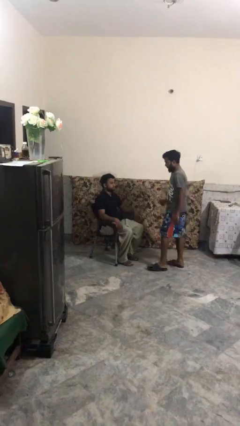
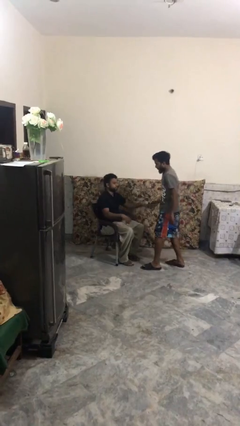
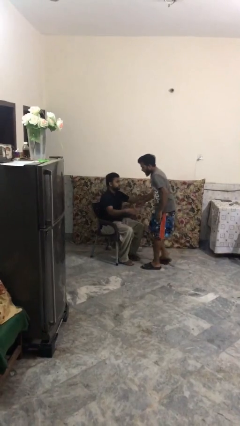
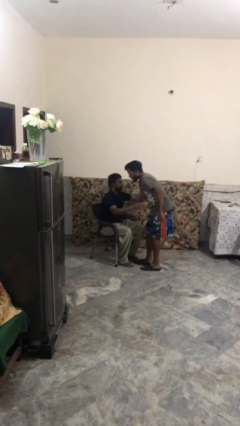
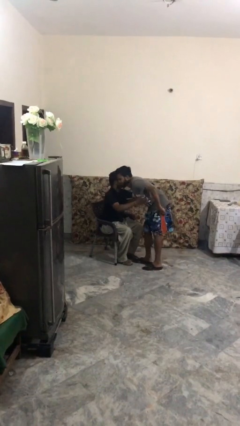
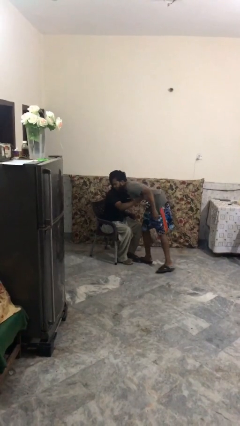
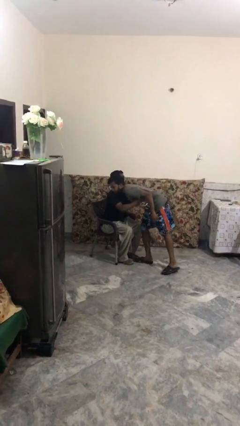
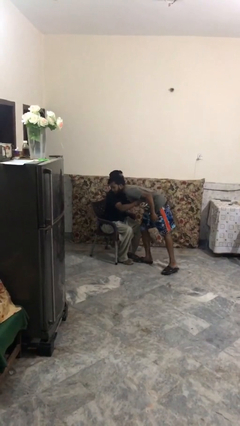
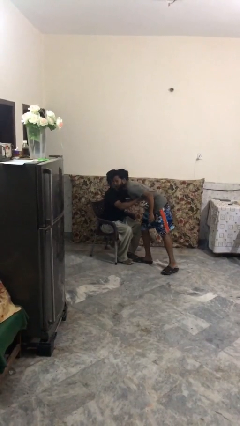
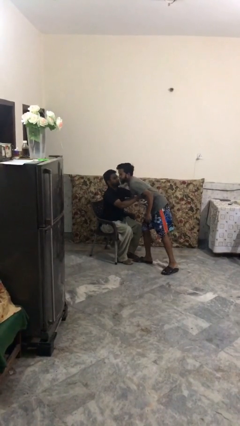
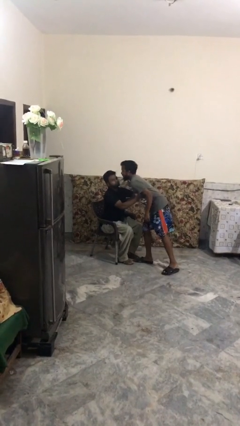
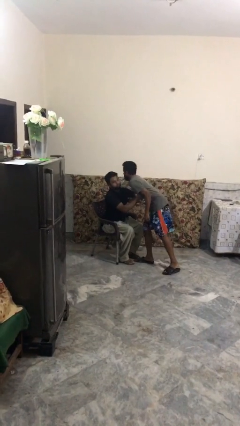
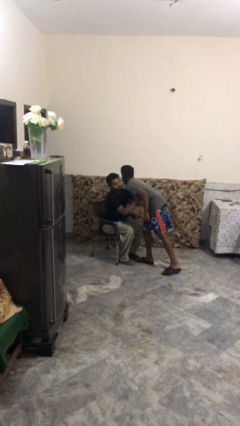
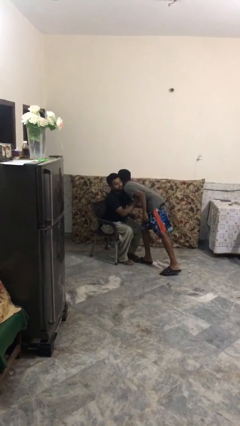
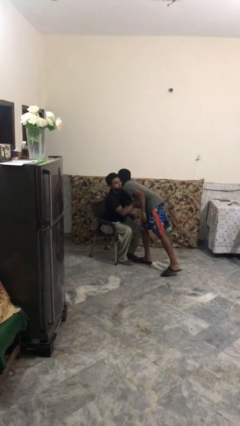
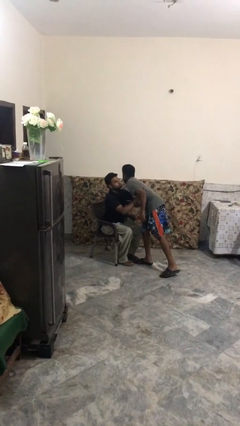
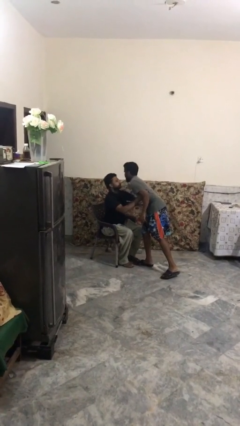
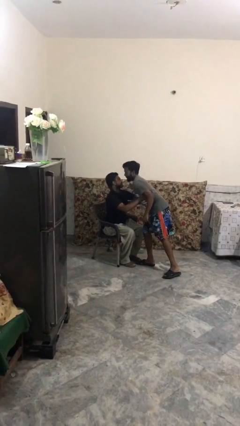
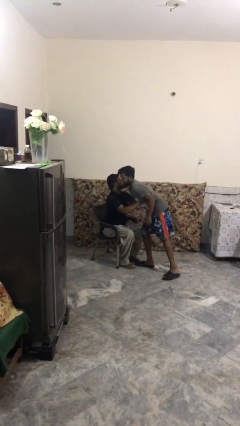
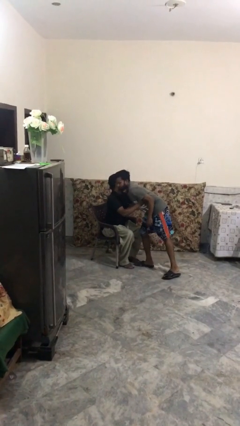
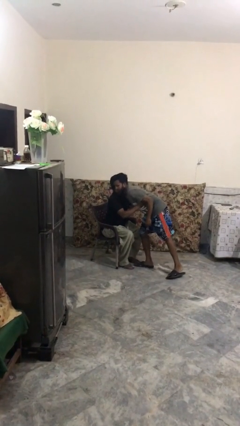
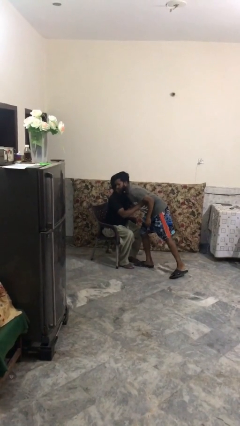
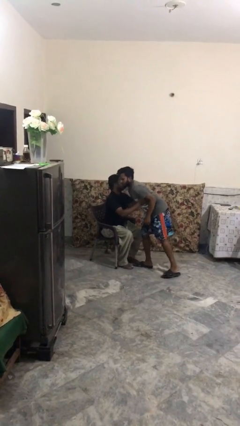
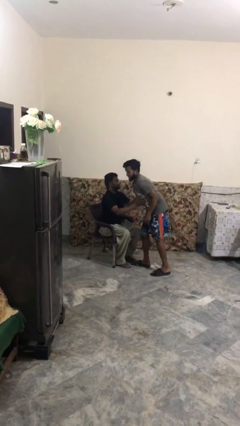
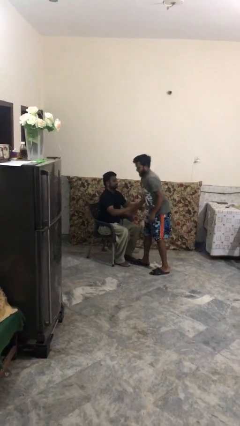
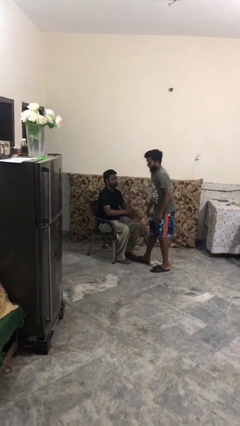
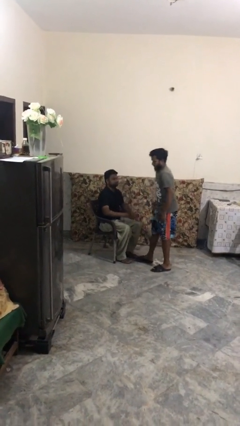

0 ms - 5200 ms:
person embraces person

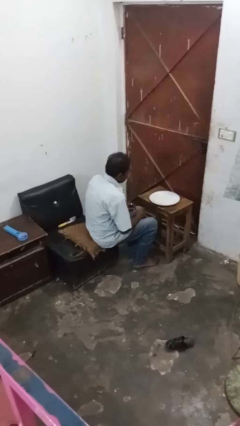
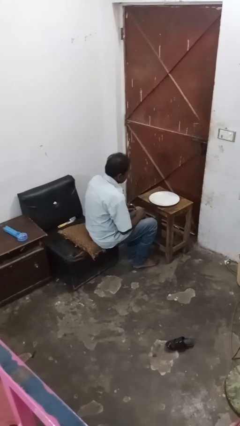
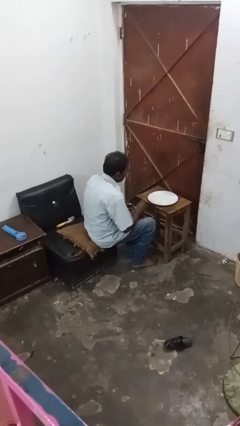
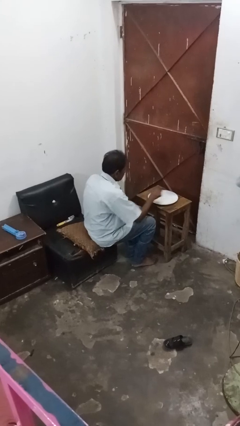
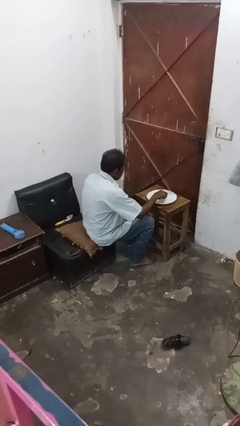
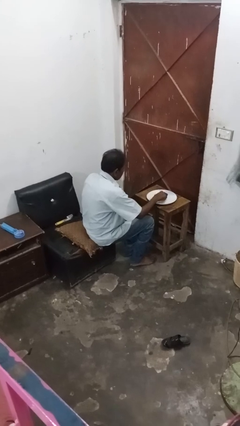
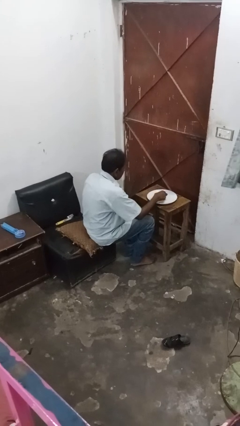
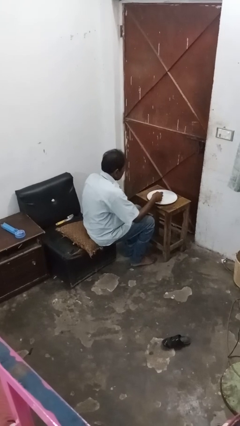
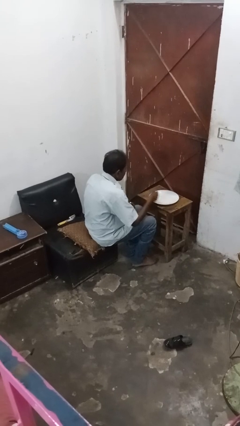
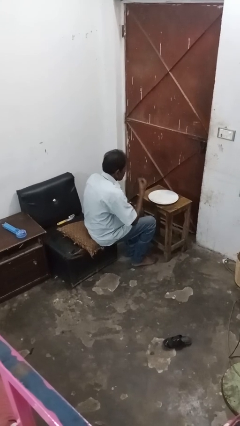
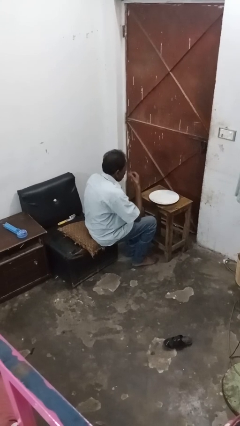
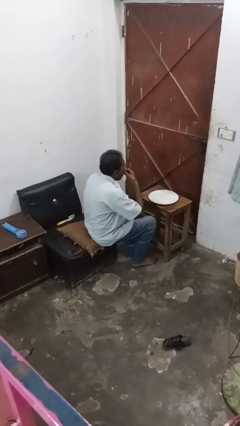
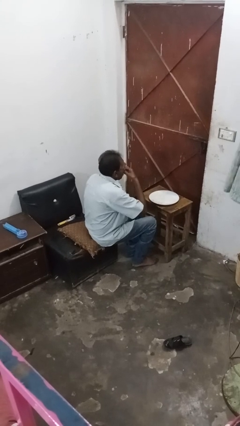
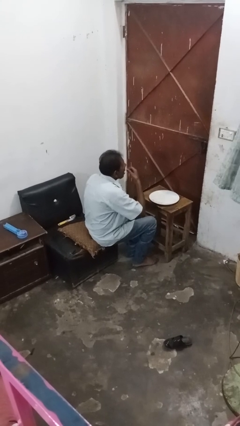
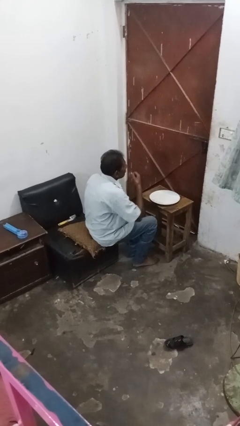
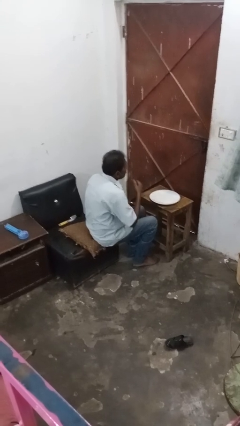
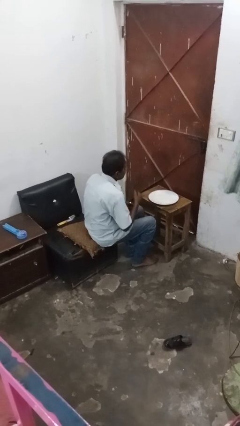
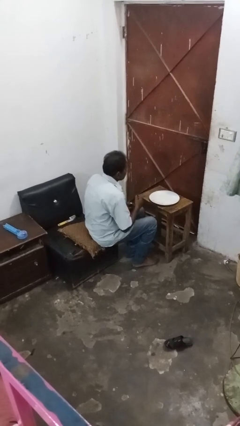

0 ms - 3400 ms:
person eats with hands

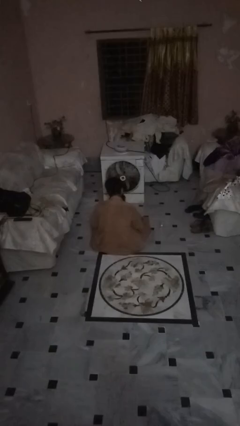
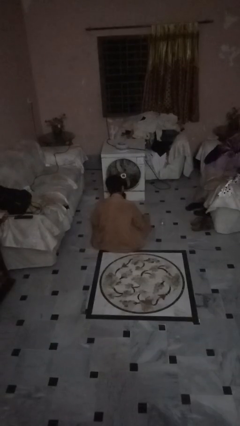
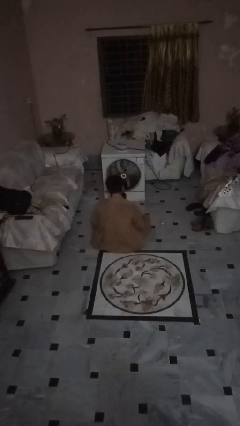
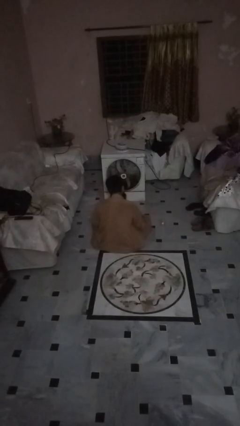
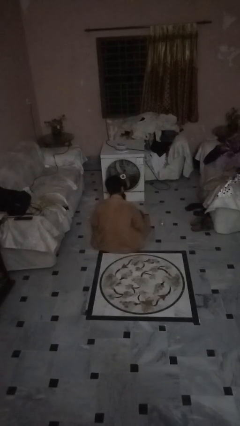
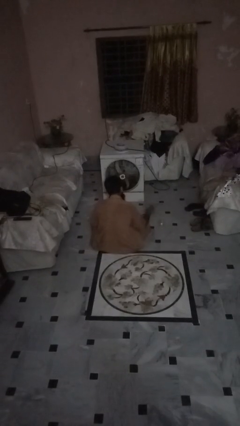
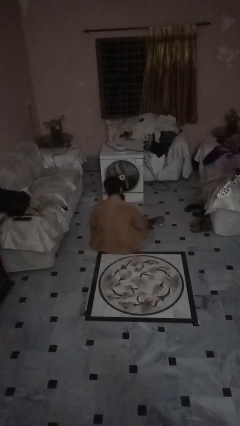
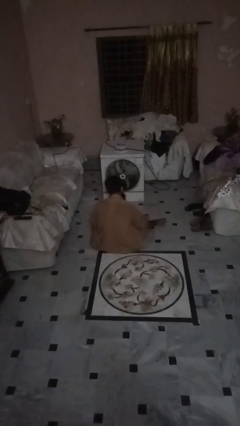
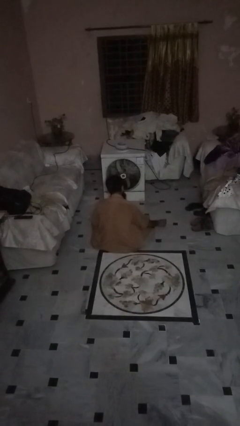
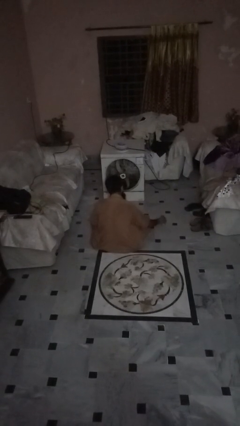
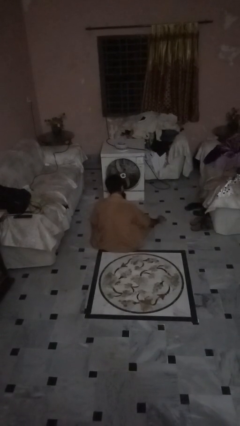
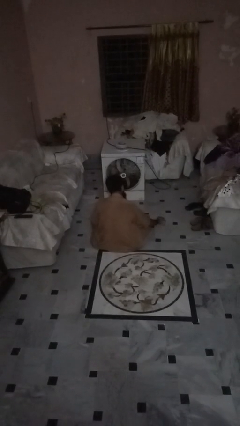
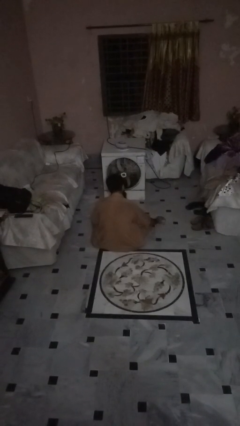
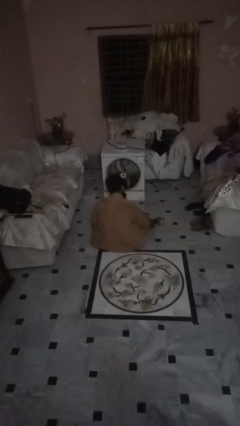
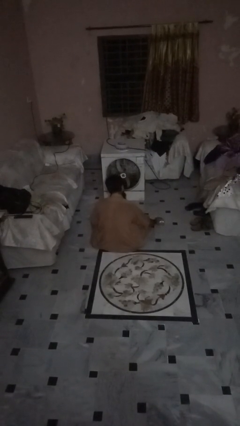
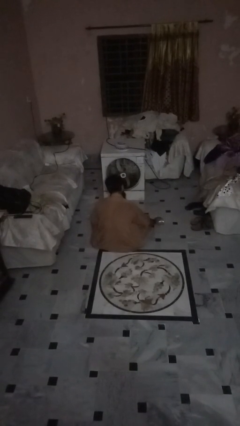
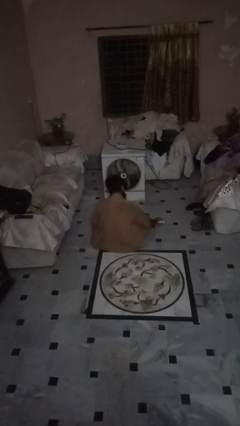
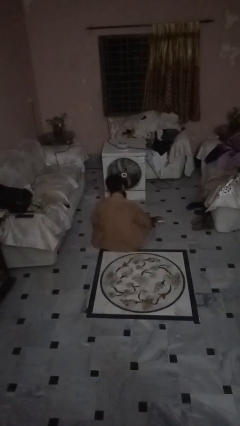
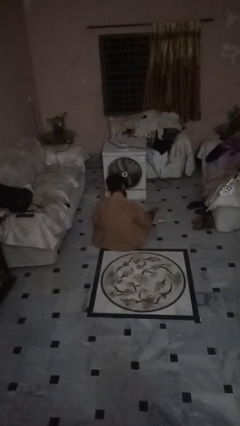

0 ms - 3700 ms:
person spills on floor

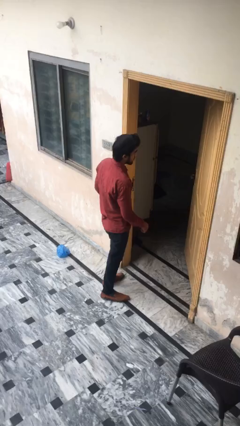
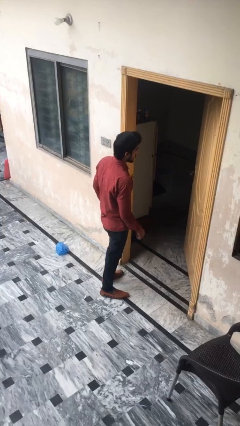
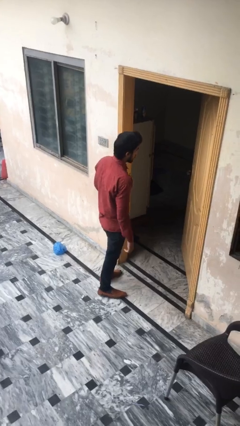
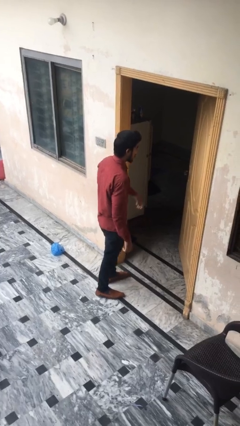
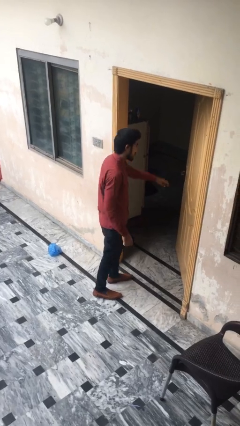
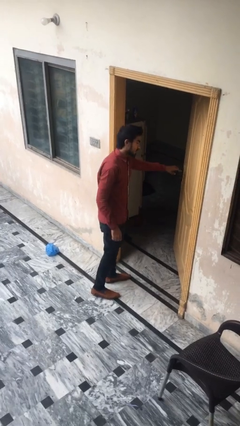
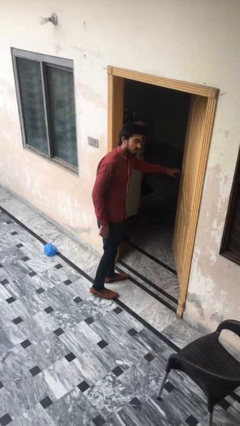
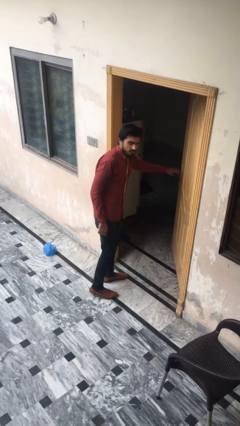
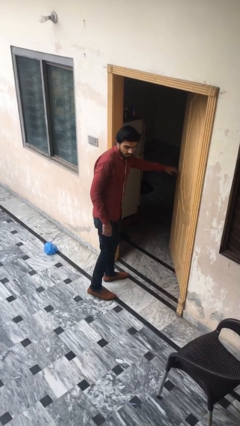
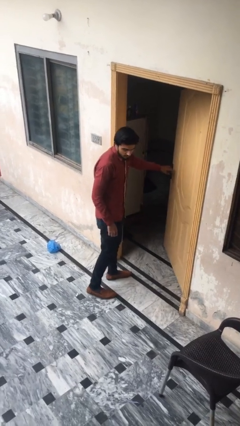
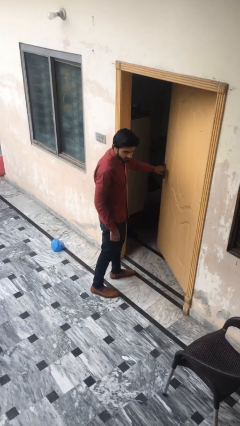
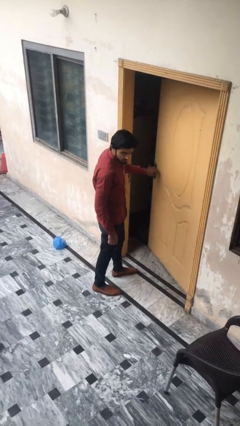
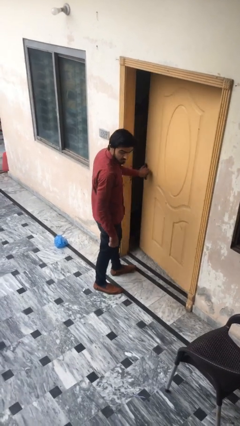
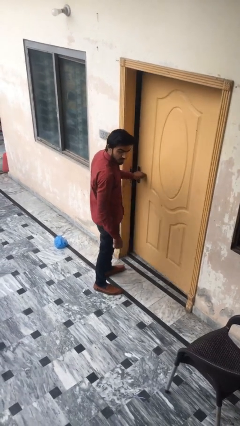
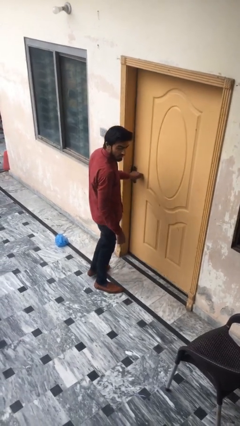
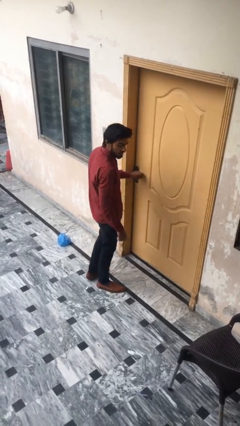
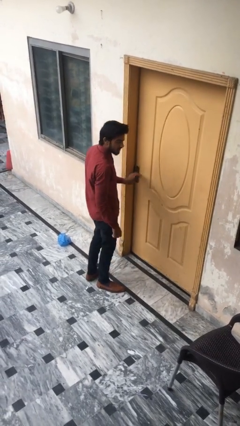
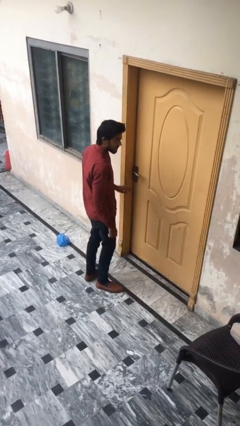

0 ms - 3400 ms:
person closes facility door

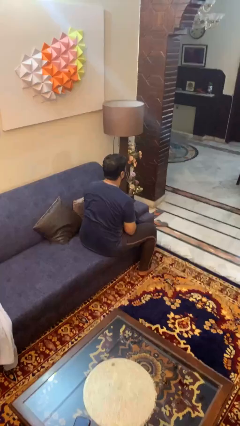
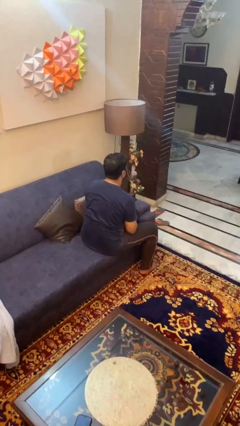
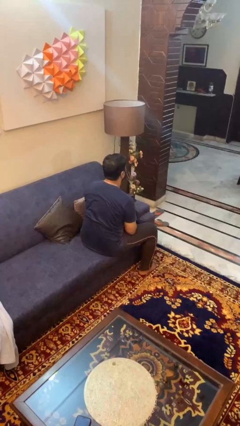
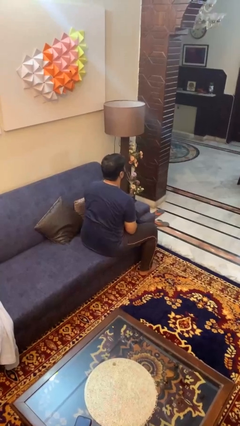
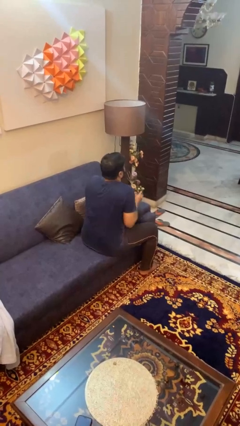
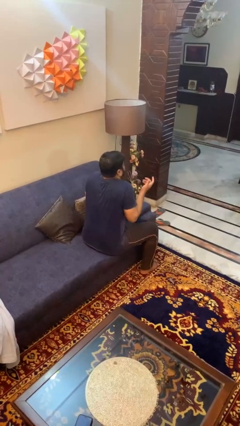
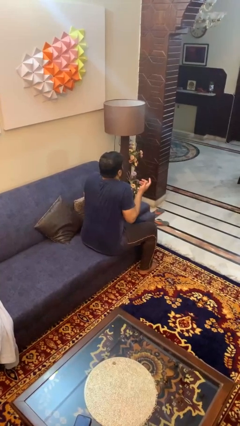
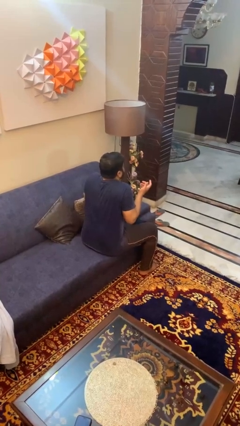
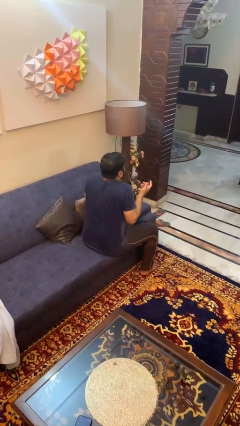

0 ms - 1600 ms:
person shrugs

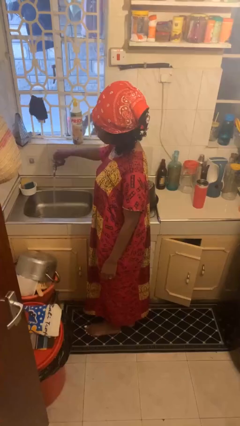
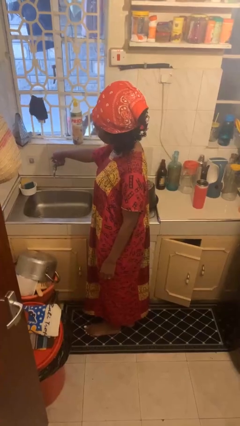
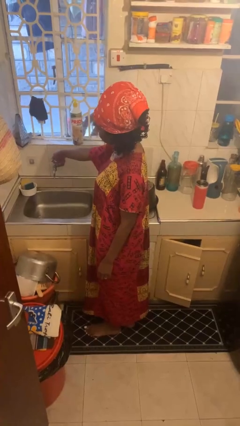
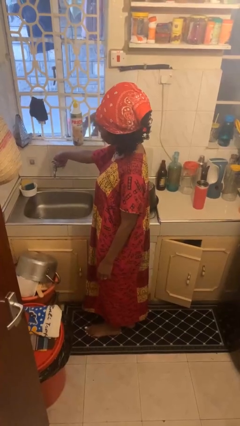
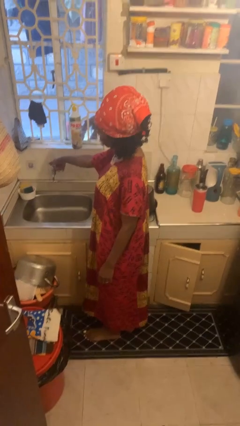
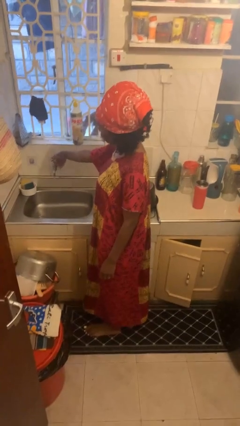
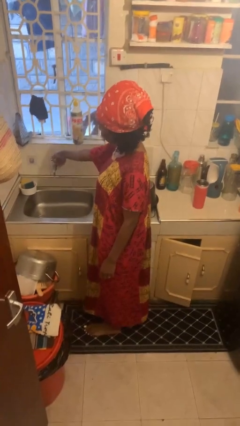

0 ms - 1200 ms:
person turns off faucet
